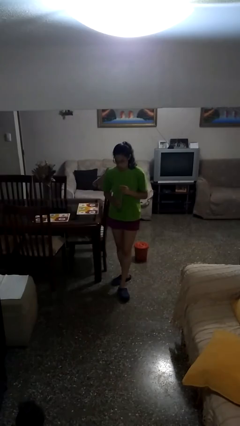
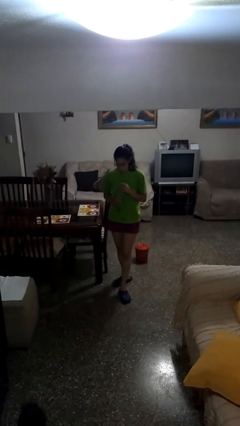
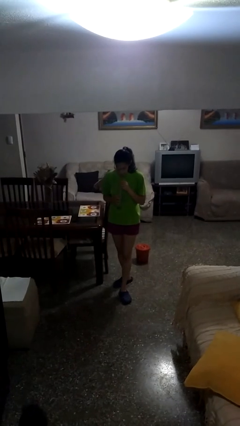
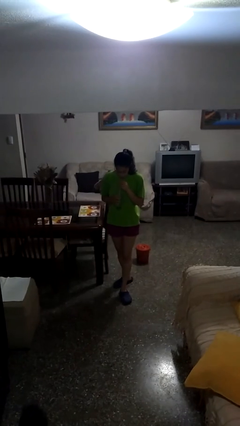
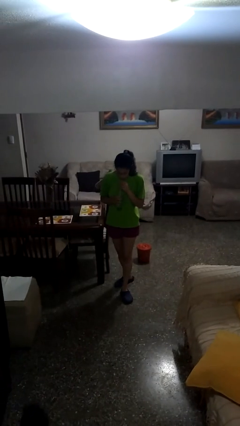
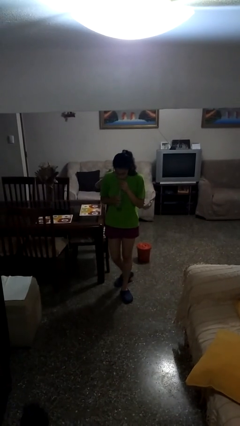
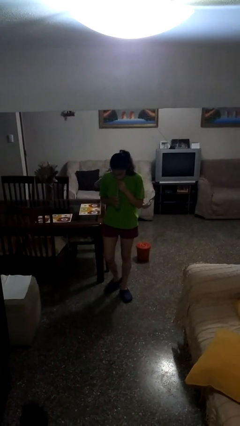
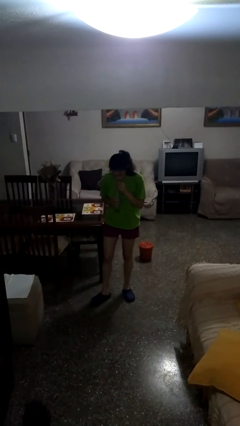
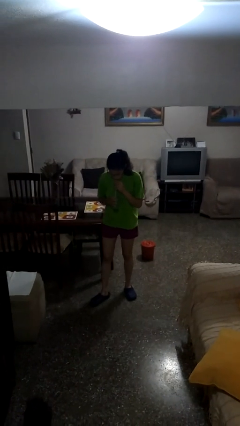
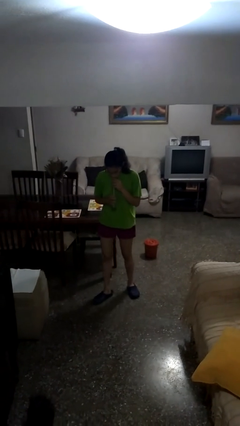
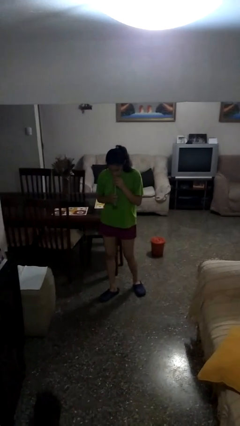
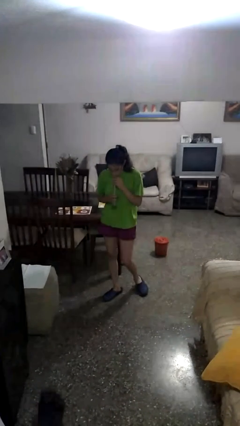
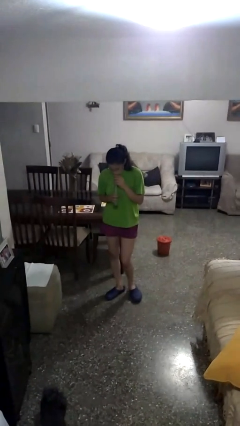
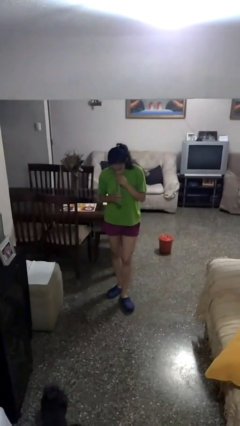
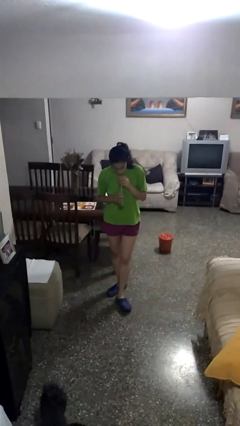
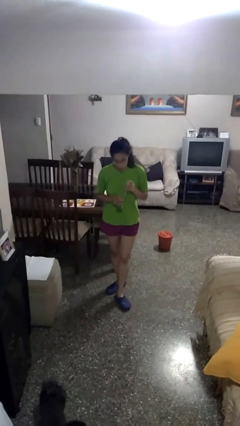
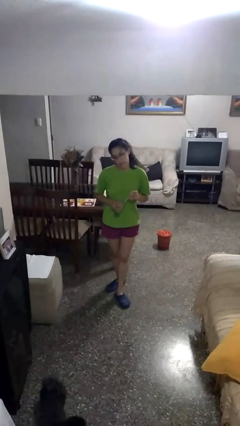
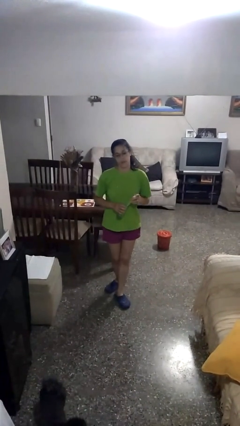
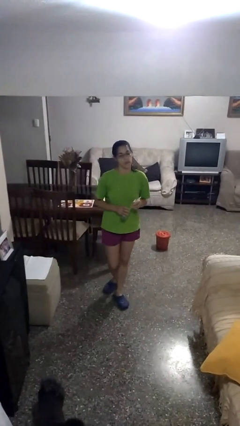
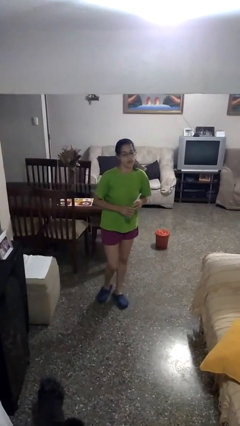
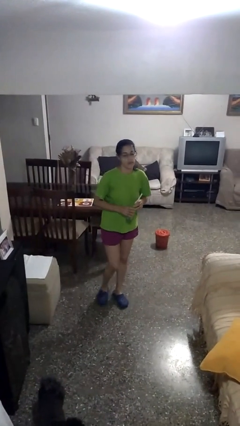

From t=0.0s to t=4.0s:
person drinks from straw

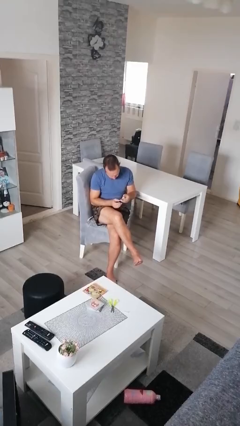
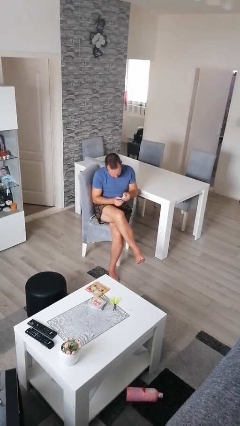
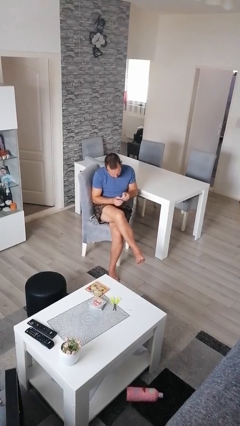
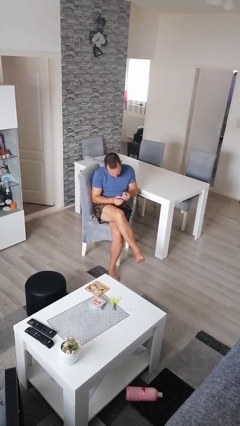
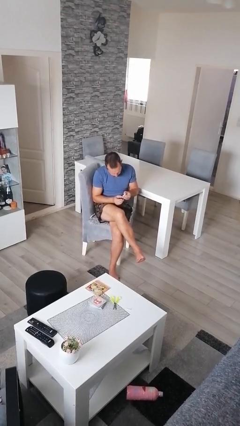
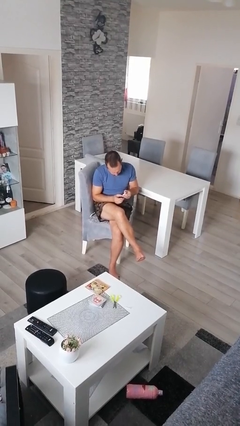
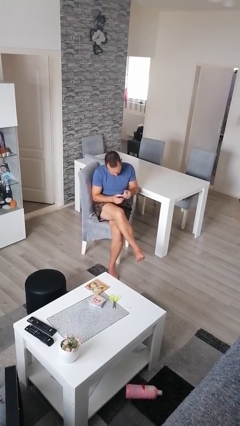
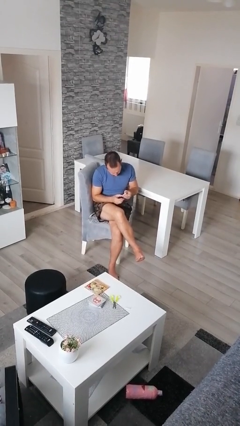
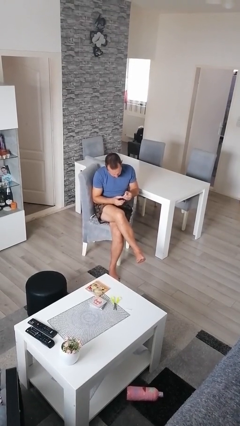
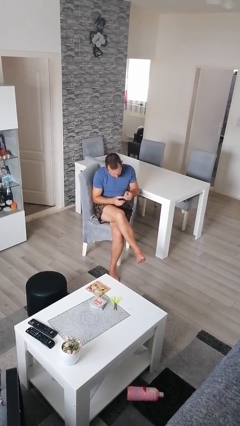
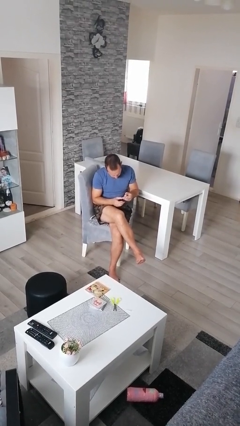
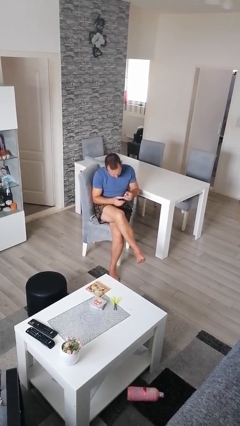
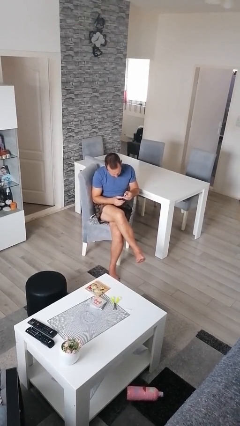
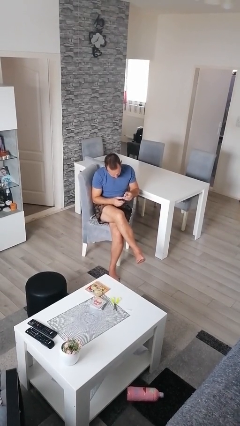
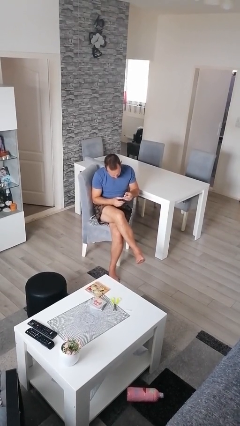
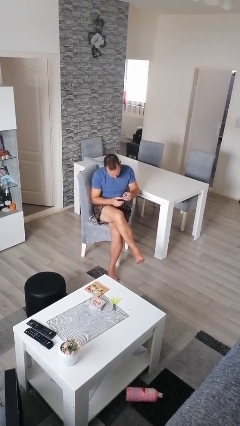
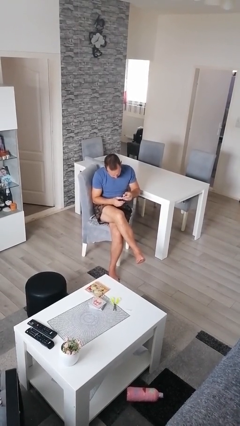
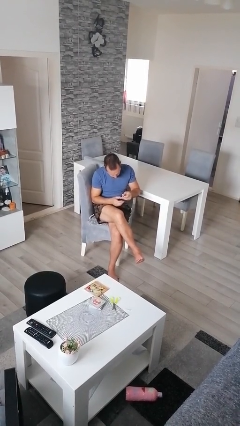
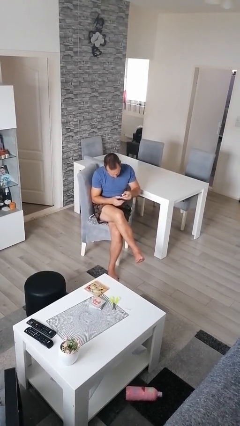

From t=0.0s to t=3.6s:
person clips fingernails

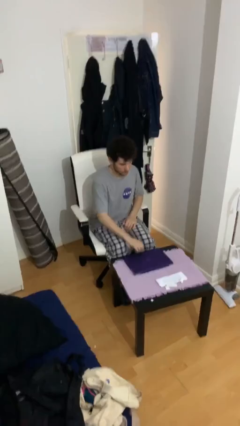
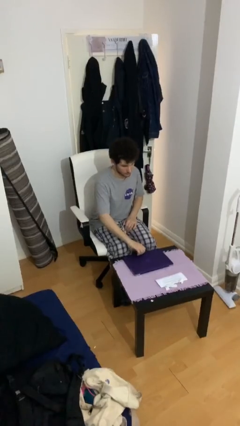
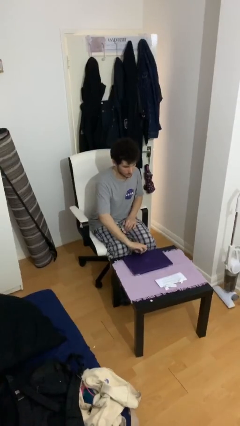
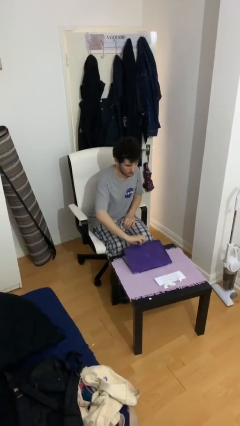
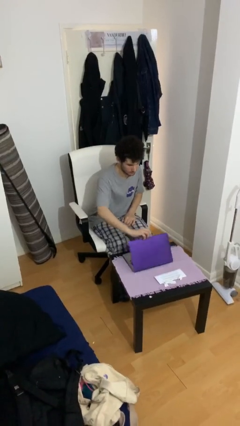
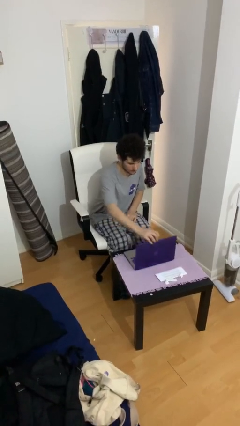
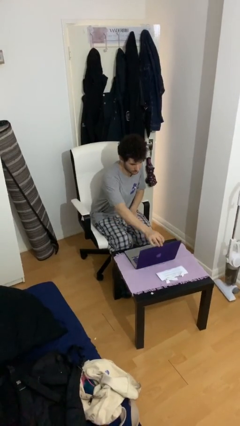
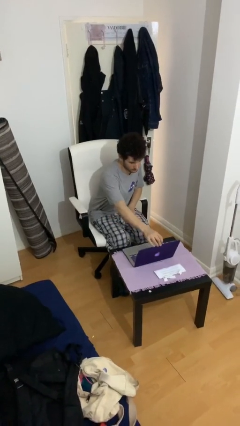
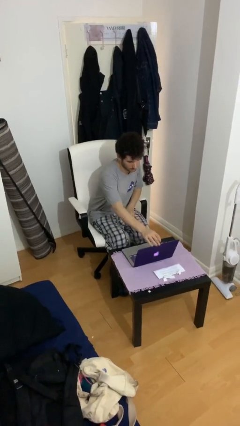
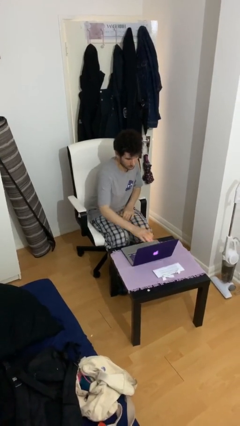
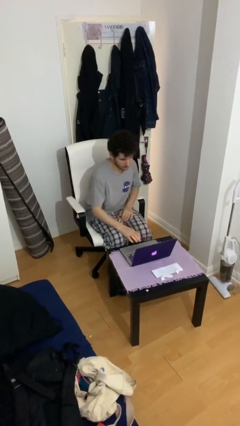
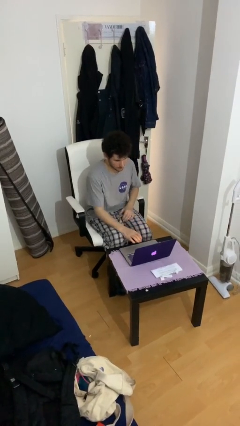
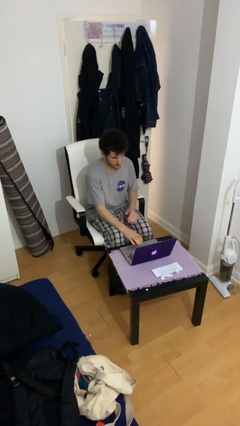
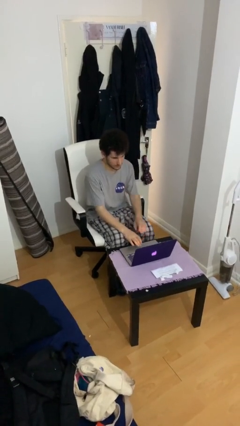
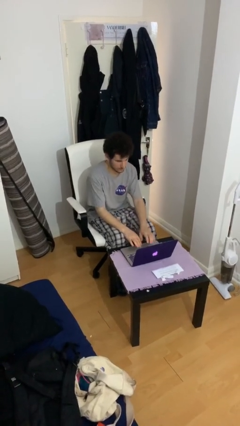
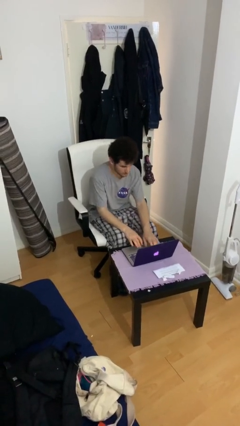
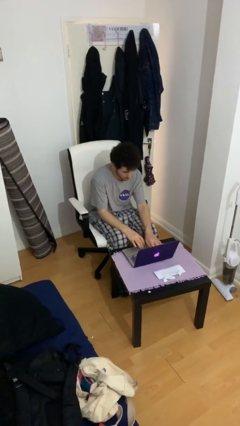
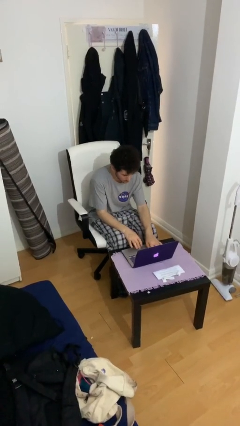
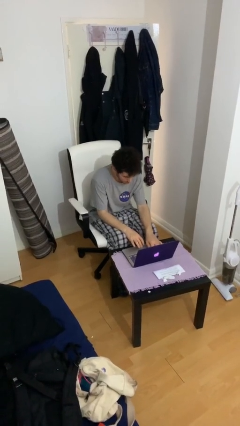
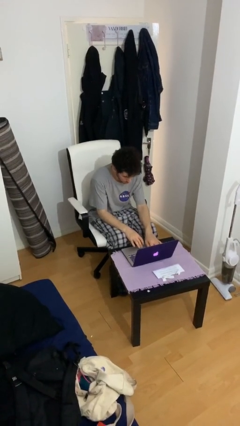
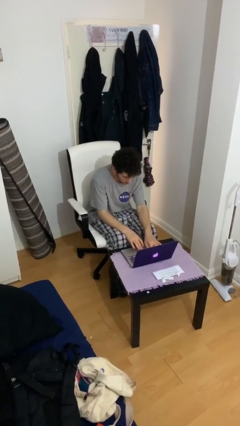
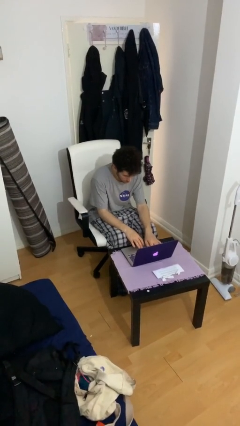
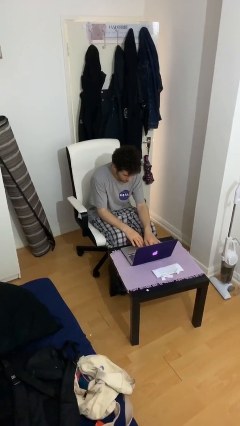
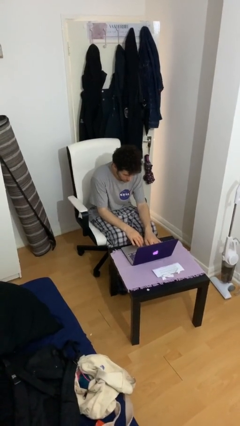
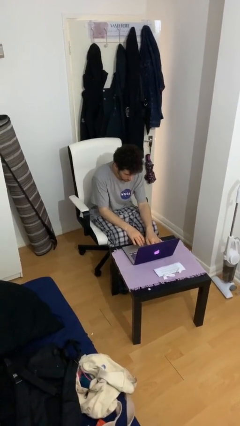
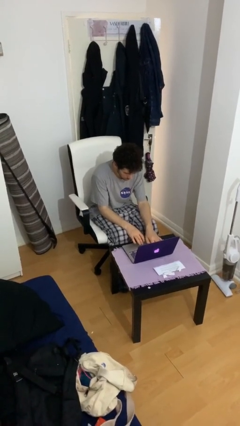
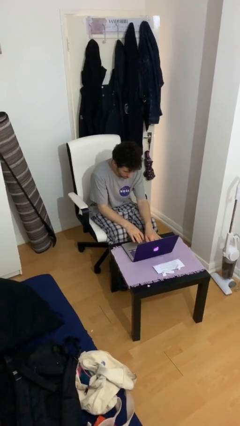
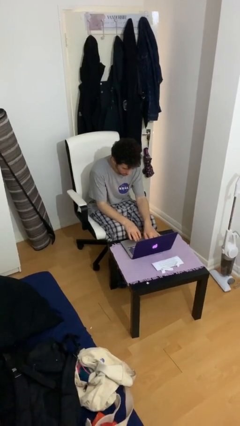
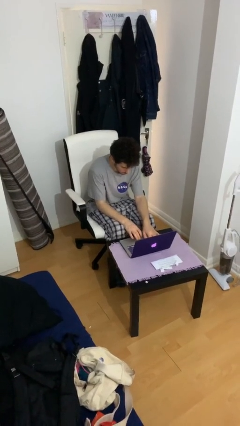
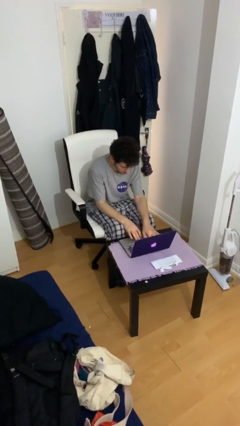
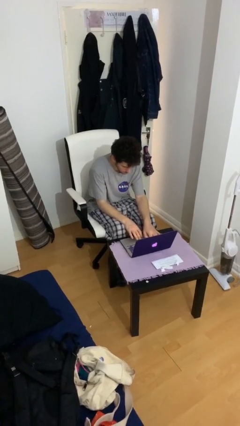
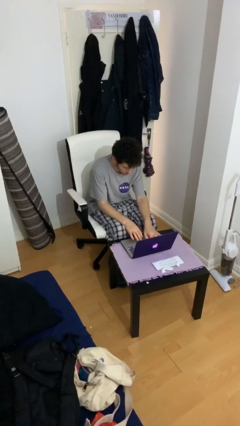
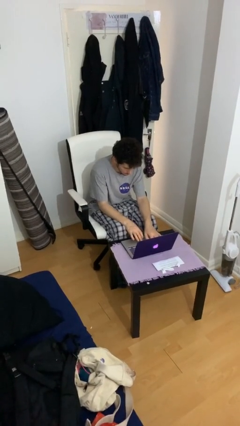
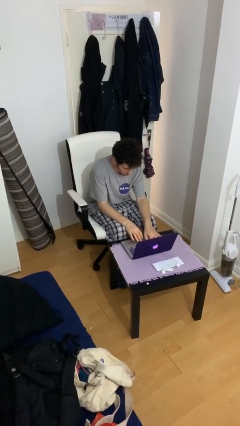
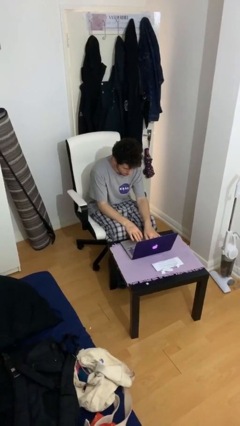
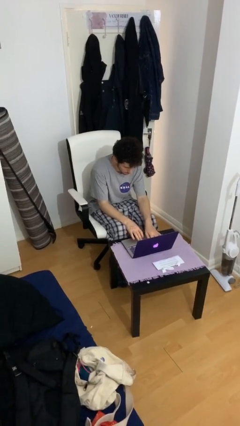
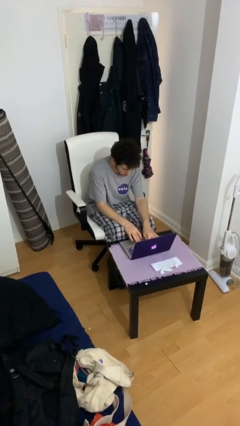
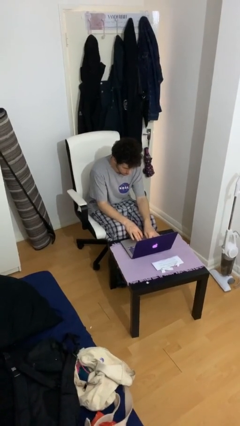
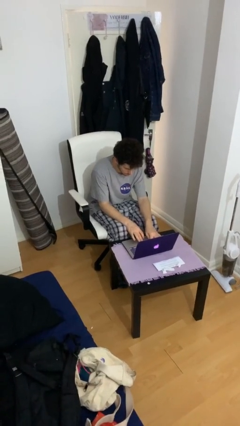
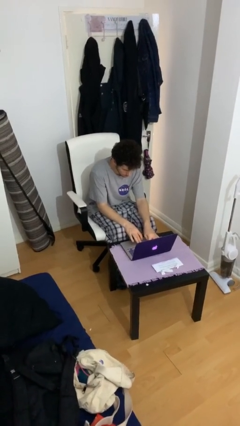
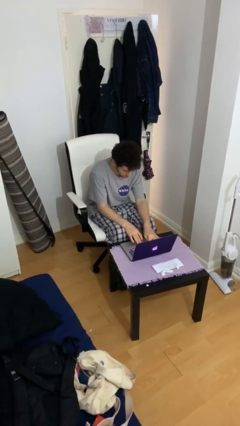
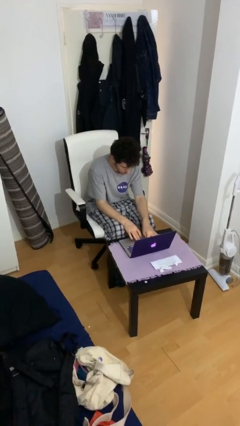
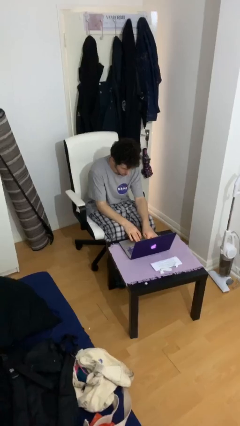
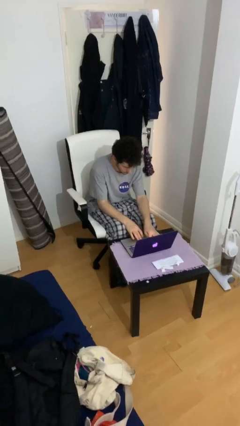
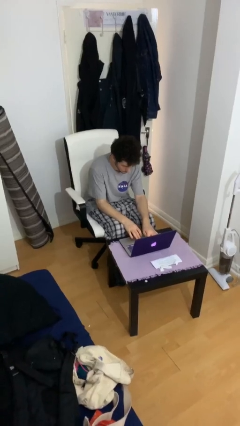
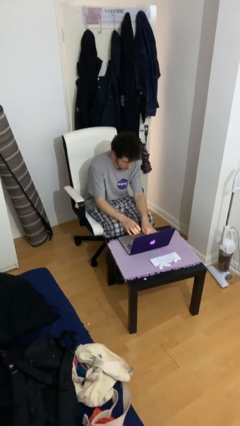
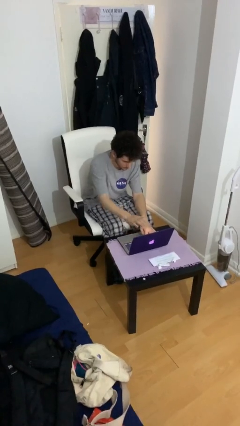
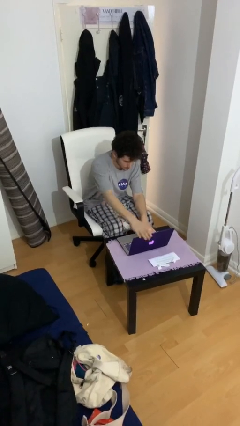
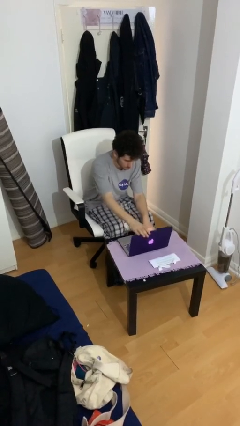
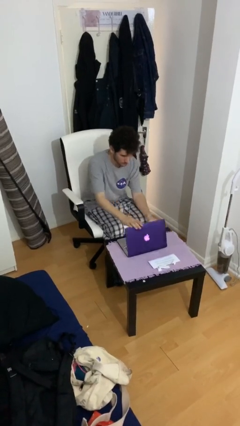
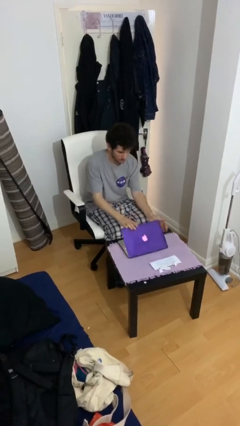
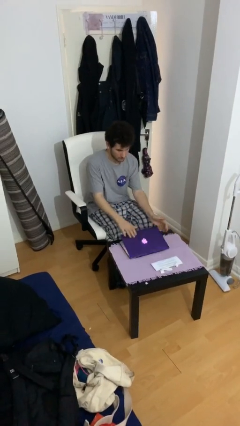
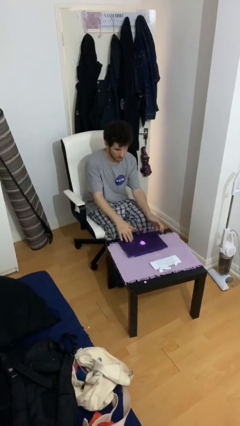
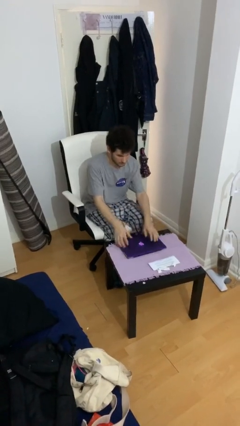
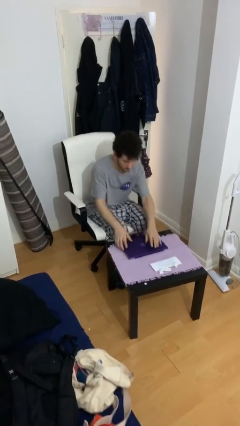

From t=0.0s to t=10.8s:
person interacts with laptop
